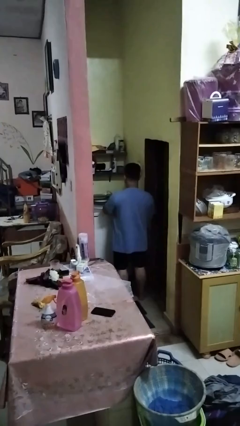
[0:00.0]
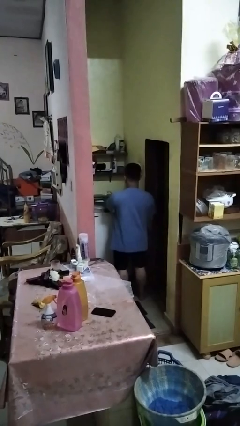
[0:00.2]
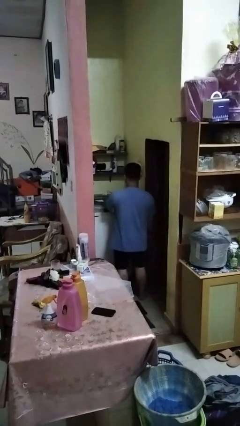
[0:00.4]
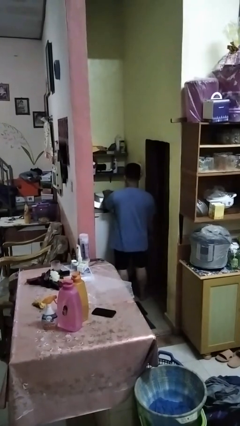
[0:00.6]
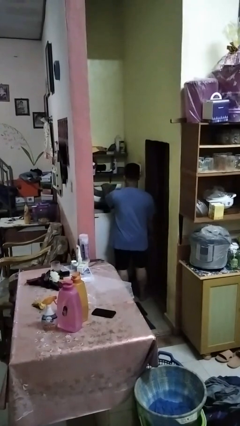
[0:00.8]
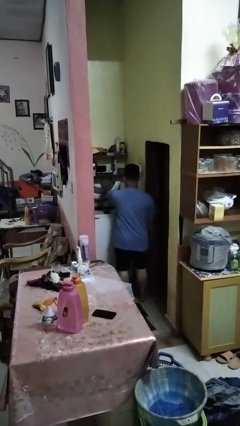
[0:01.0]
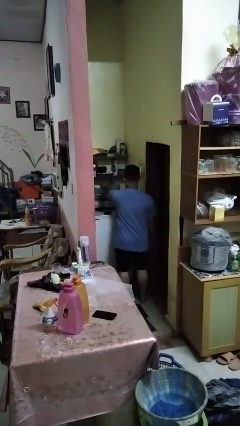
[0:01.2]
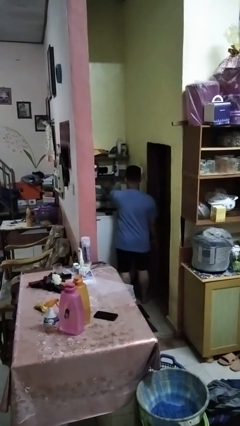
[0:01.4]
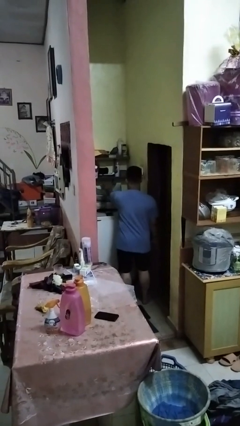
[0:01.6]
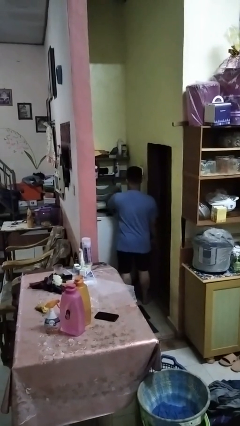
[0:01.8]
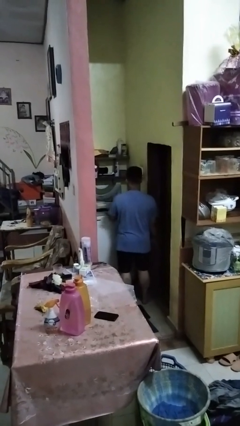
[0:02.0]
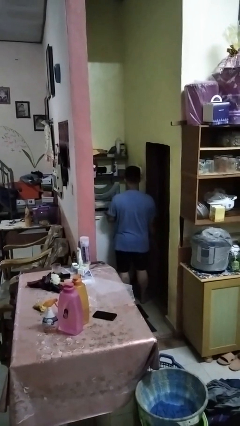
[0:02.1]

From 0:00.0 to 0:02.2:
person opens clothes washer

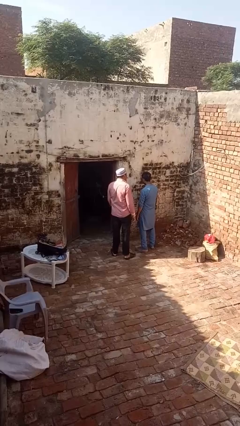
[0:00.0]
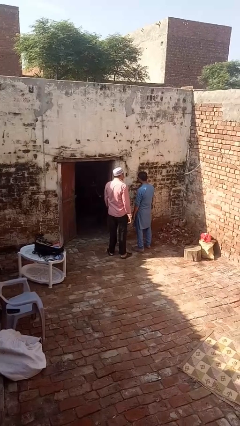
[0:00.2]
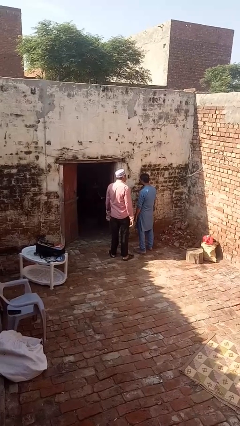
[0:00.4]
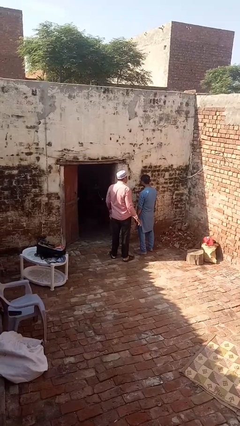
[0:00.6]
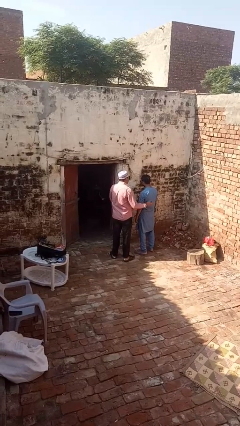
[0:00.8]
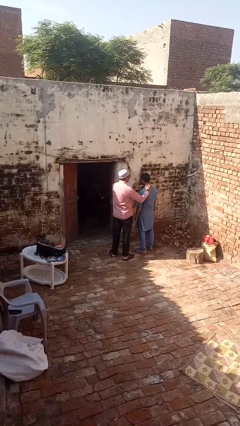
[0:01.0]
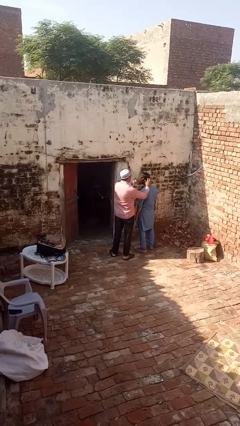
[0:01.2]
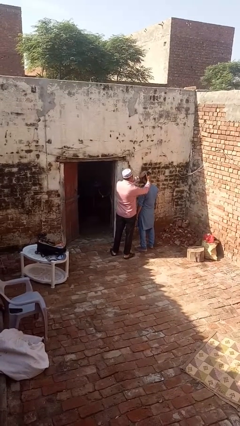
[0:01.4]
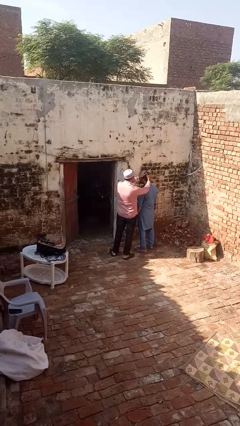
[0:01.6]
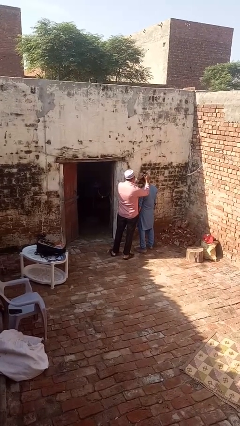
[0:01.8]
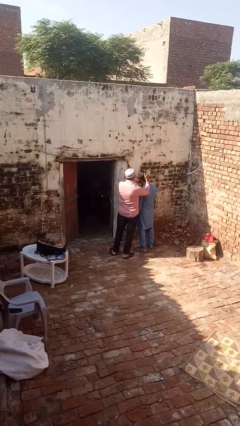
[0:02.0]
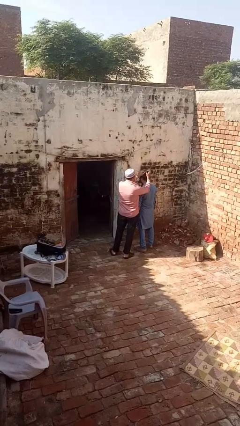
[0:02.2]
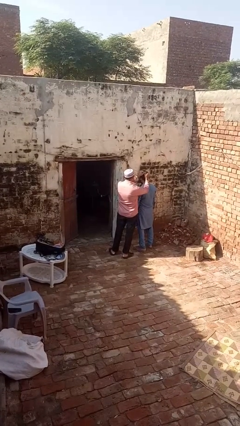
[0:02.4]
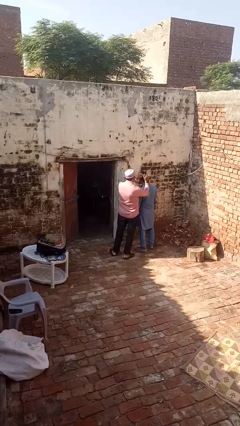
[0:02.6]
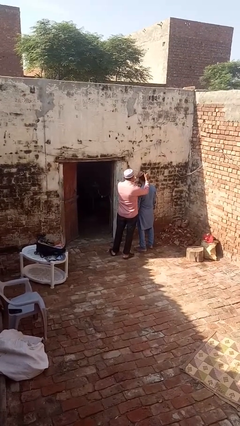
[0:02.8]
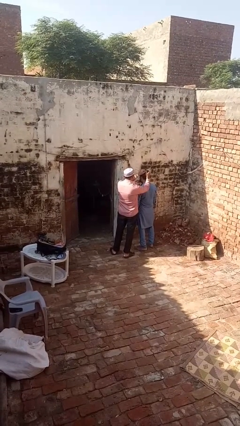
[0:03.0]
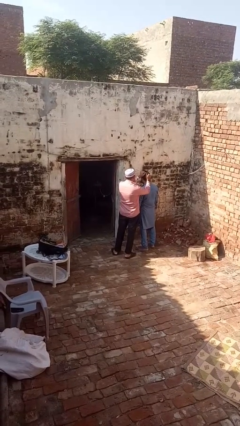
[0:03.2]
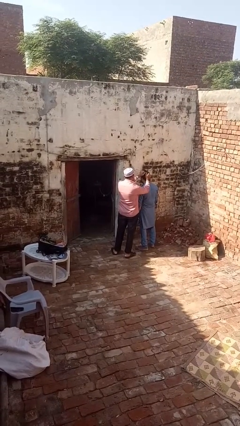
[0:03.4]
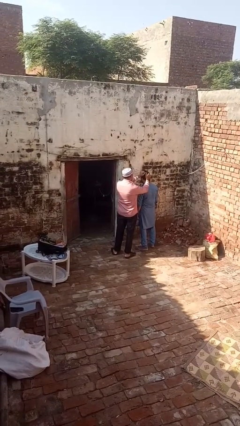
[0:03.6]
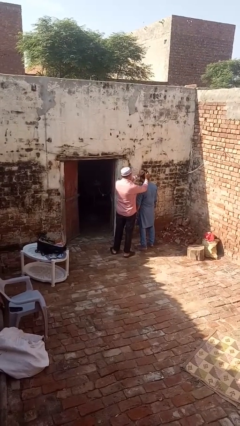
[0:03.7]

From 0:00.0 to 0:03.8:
person grabs person by hair

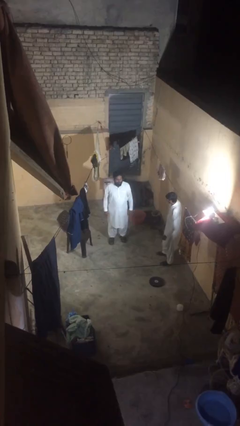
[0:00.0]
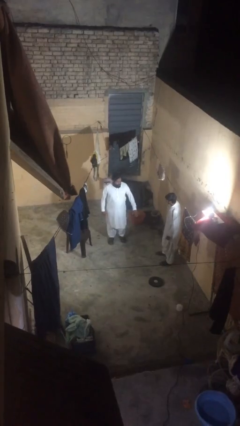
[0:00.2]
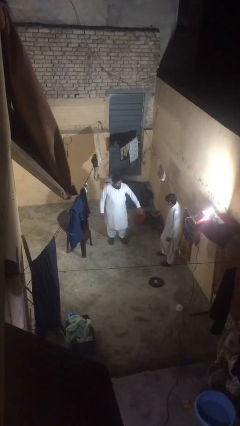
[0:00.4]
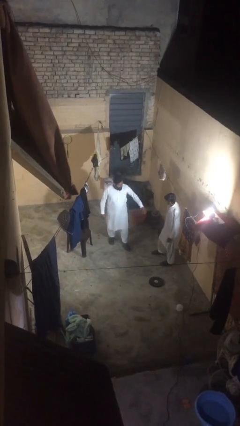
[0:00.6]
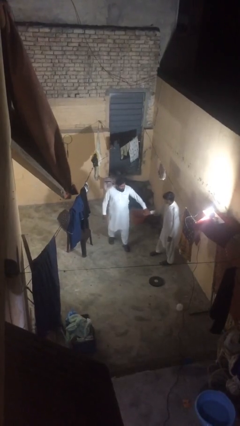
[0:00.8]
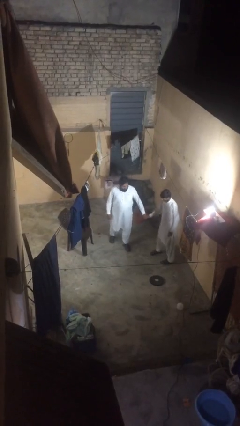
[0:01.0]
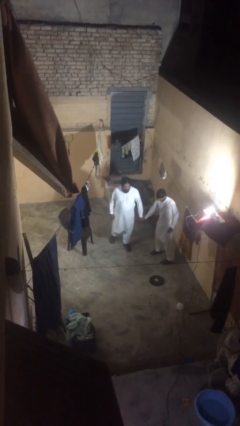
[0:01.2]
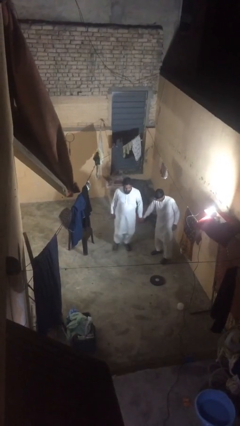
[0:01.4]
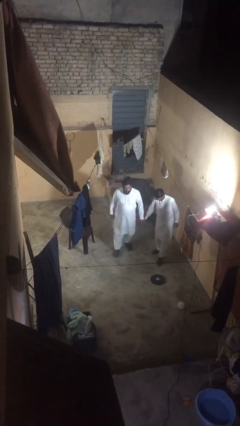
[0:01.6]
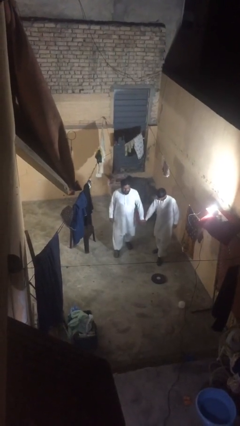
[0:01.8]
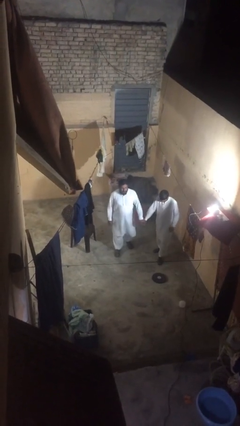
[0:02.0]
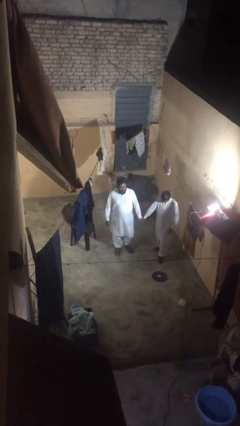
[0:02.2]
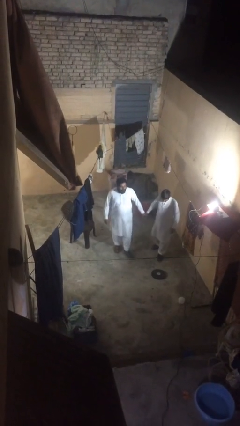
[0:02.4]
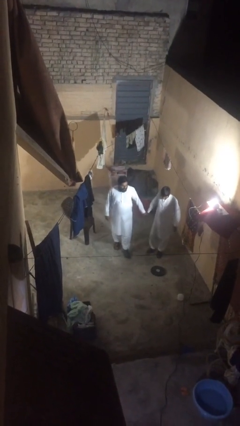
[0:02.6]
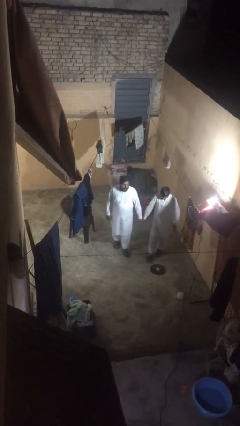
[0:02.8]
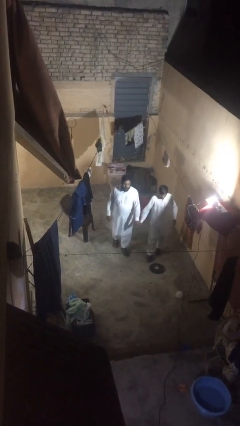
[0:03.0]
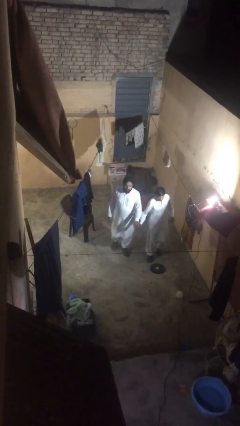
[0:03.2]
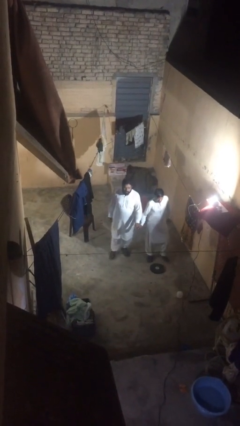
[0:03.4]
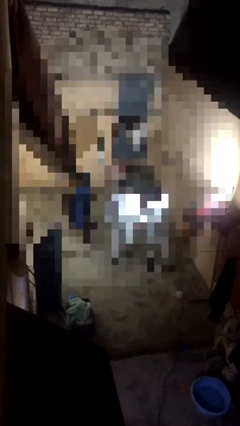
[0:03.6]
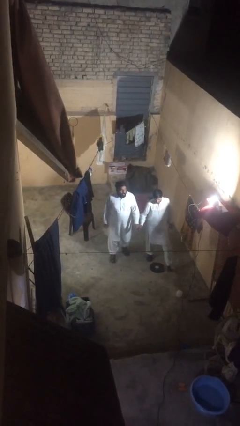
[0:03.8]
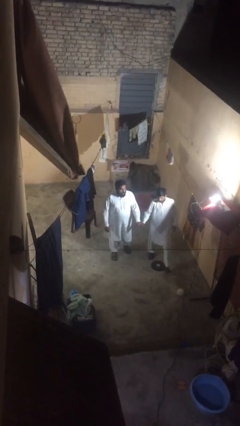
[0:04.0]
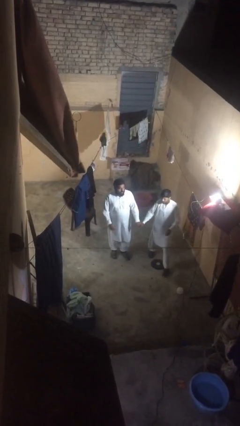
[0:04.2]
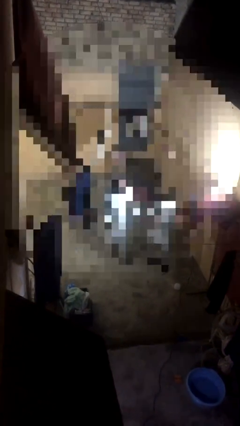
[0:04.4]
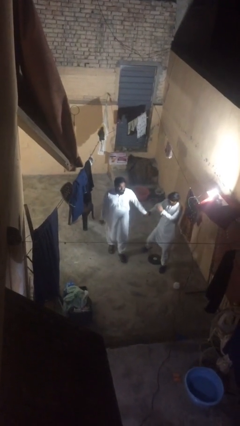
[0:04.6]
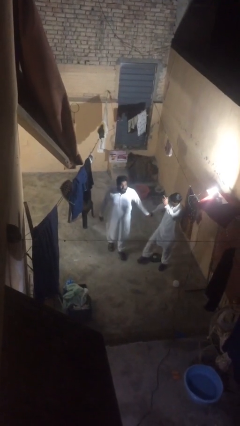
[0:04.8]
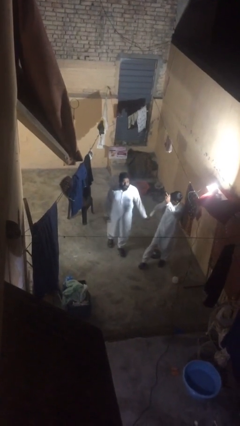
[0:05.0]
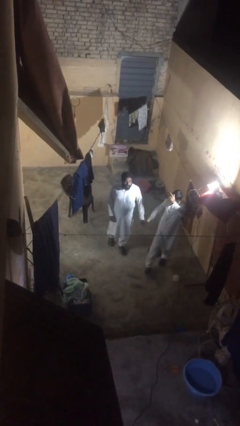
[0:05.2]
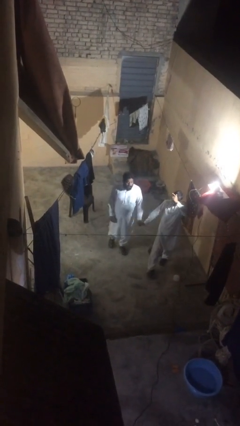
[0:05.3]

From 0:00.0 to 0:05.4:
person holds hand

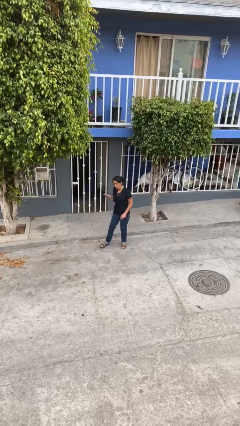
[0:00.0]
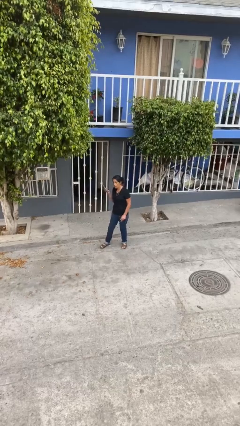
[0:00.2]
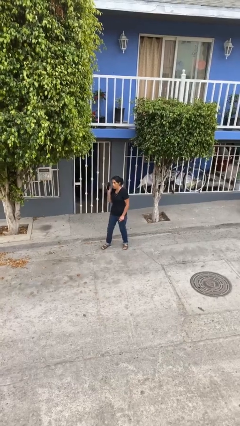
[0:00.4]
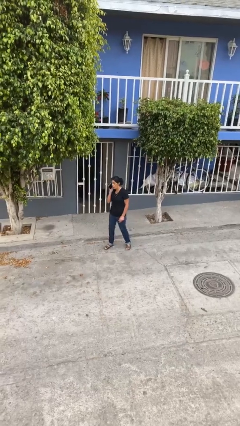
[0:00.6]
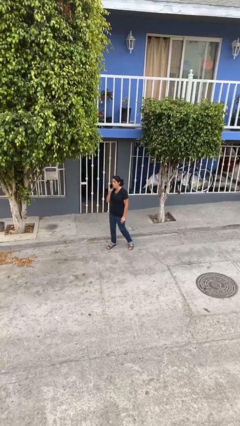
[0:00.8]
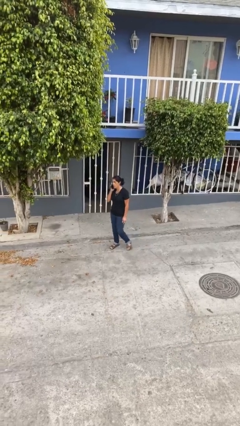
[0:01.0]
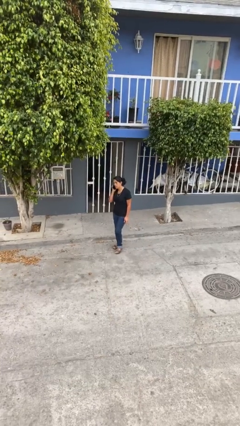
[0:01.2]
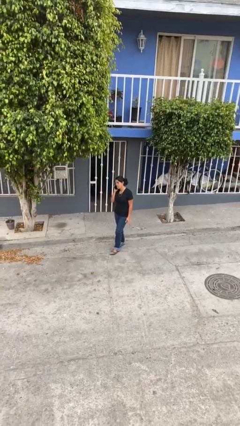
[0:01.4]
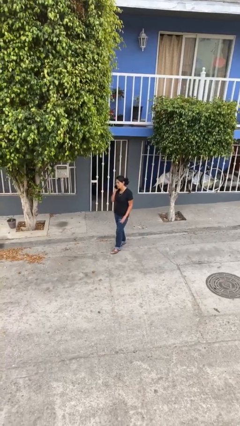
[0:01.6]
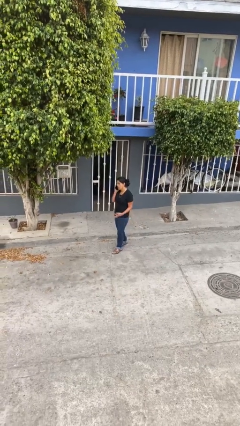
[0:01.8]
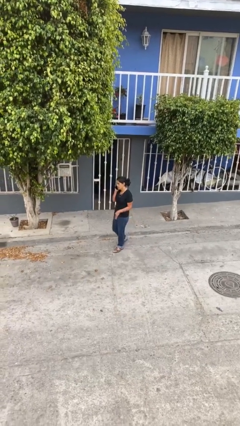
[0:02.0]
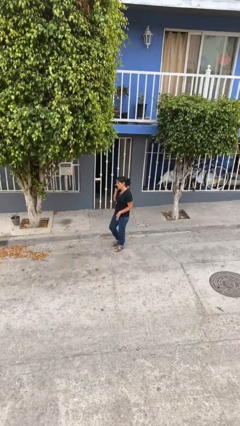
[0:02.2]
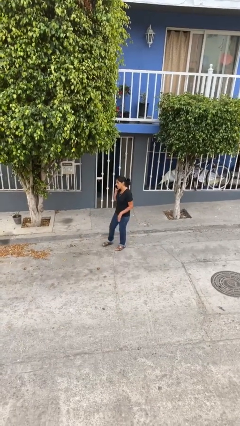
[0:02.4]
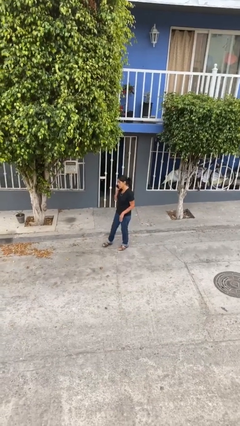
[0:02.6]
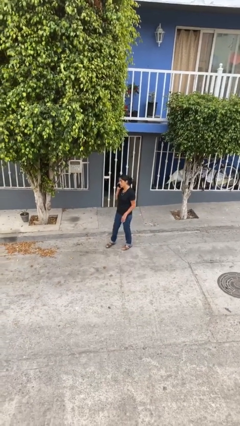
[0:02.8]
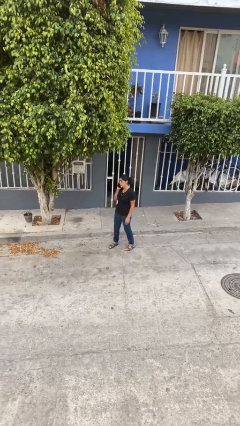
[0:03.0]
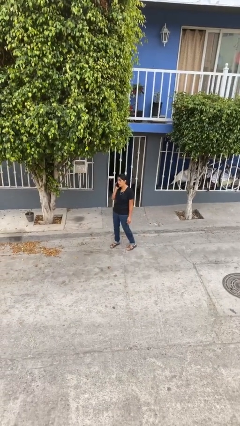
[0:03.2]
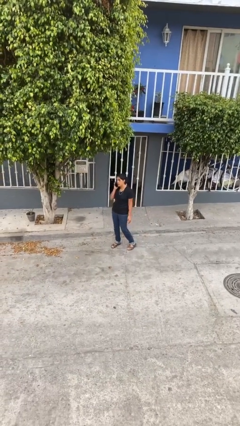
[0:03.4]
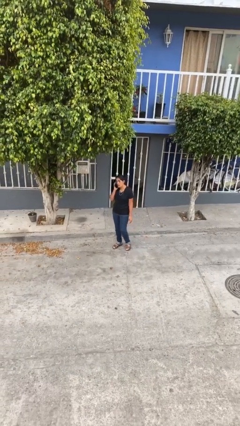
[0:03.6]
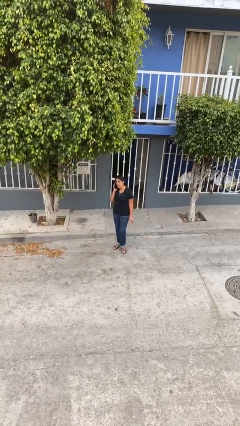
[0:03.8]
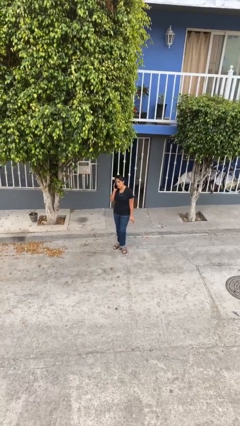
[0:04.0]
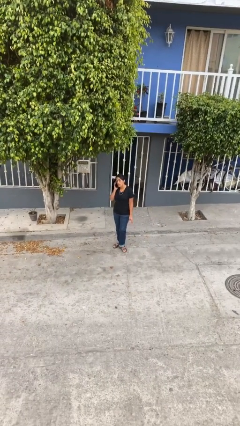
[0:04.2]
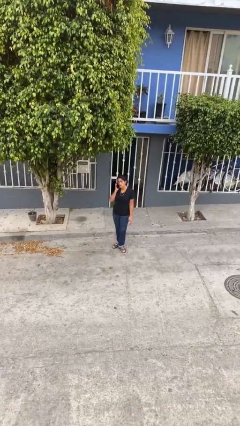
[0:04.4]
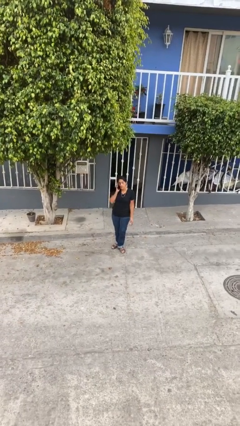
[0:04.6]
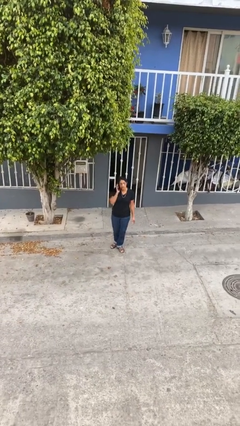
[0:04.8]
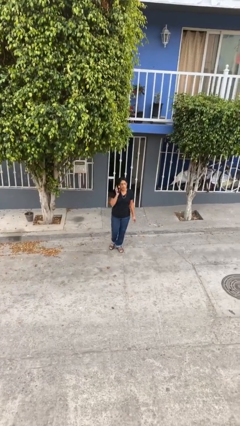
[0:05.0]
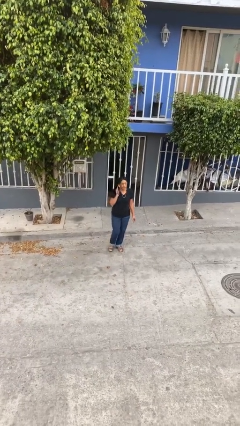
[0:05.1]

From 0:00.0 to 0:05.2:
person talks on phone

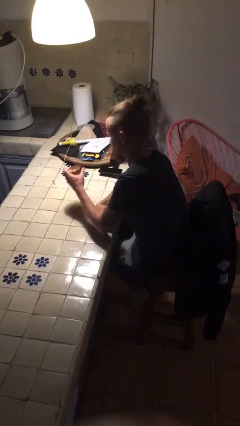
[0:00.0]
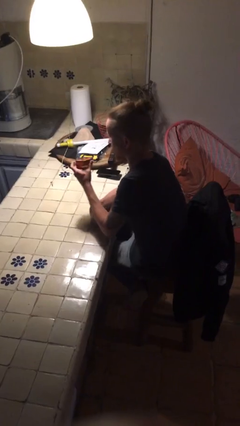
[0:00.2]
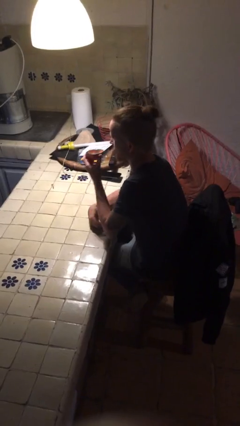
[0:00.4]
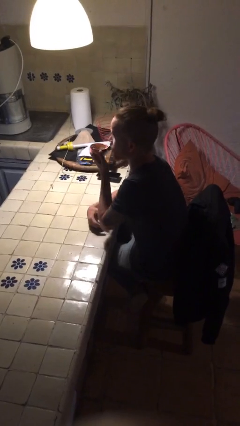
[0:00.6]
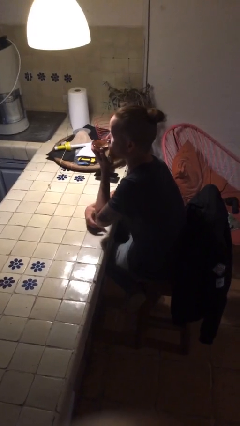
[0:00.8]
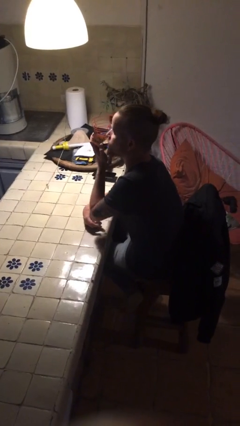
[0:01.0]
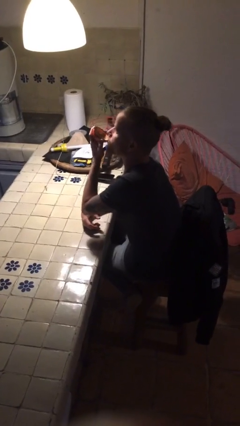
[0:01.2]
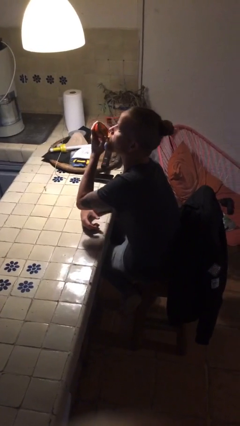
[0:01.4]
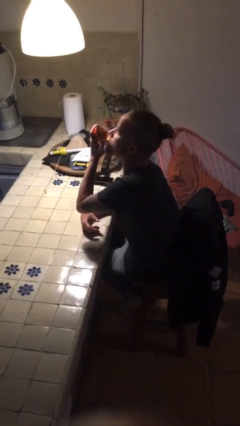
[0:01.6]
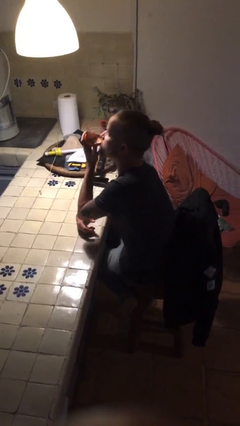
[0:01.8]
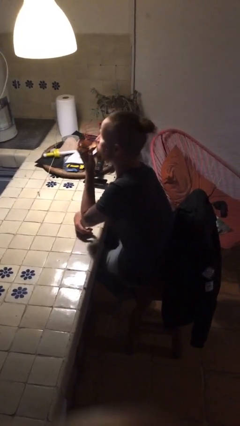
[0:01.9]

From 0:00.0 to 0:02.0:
person drinks from shotglass
